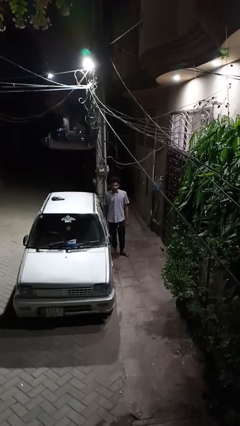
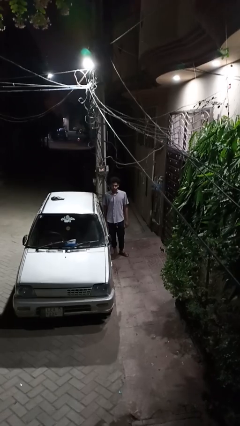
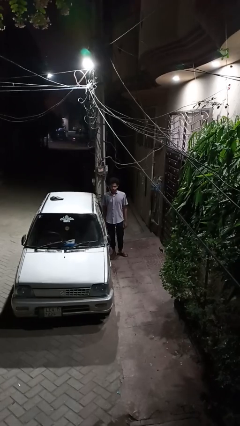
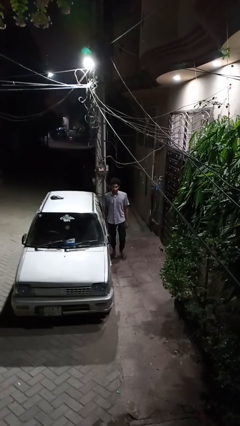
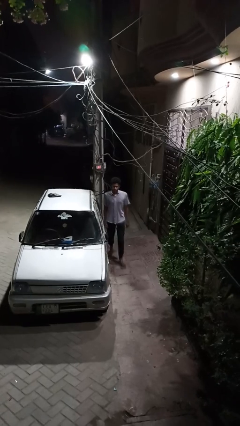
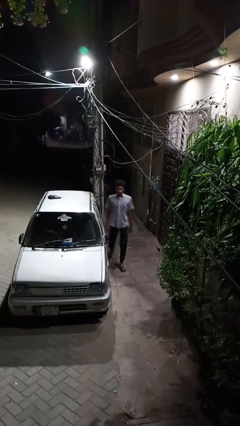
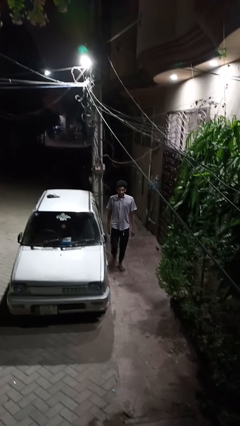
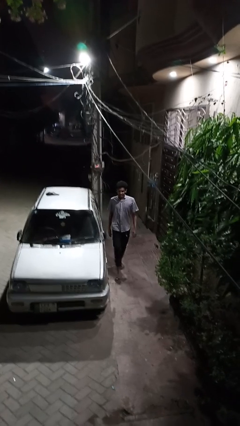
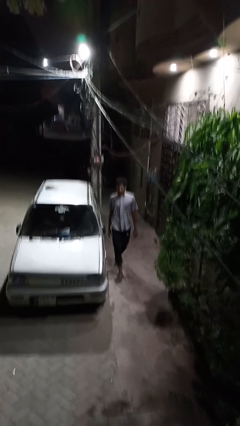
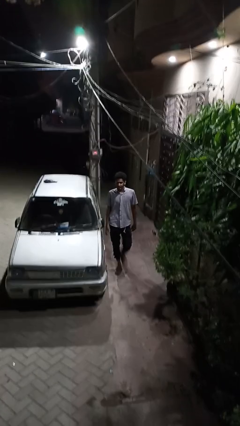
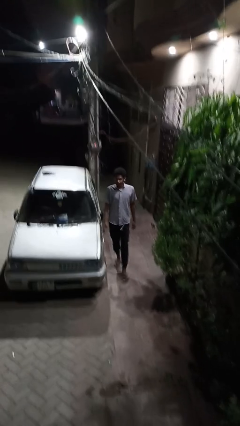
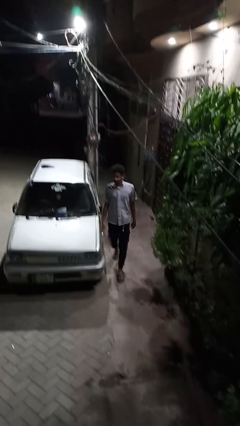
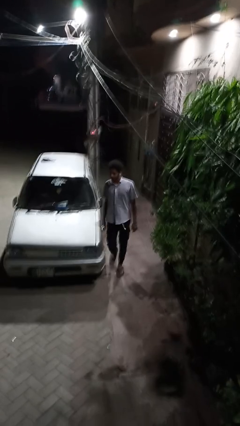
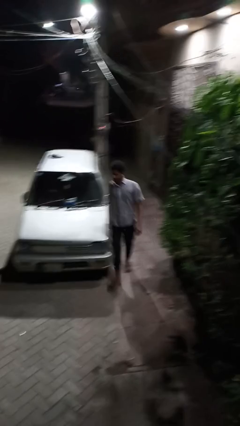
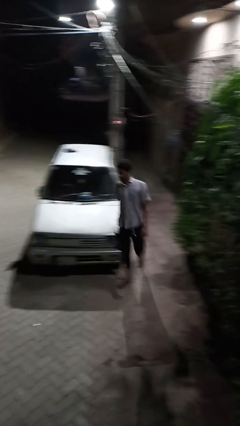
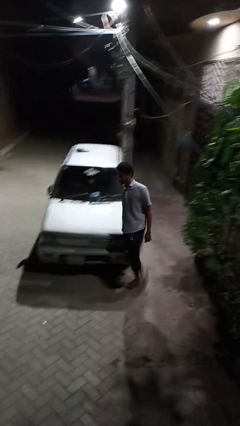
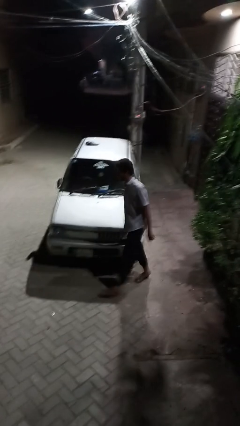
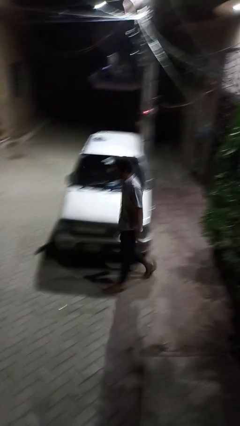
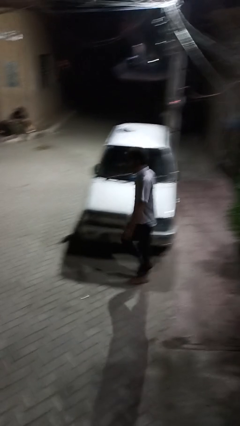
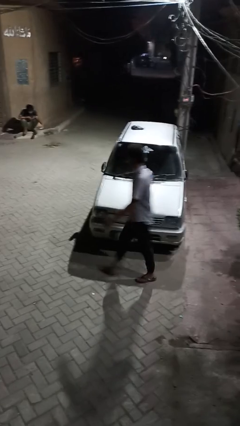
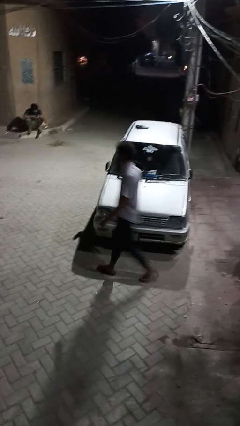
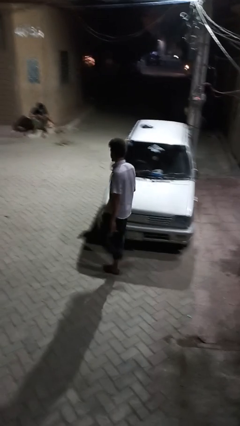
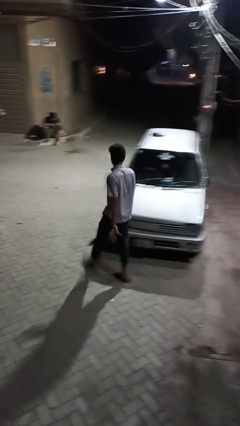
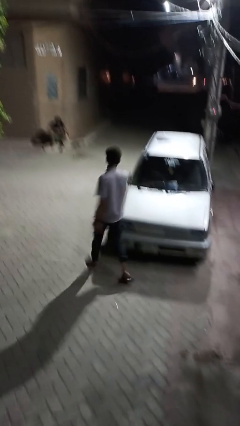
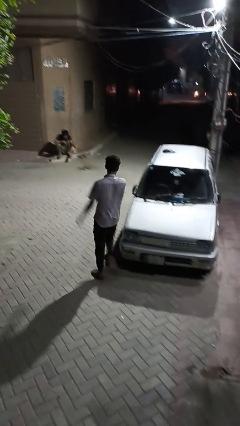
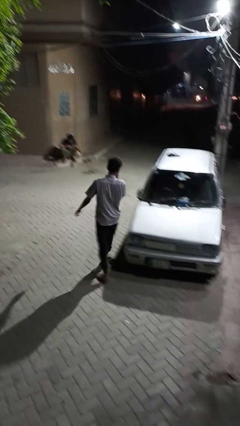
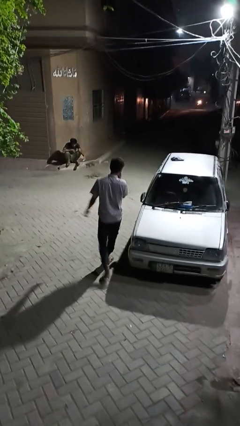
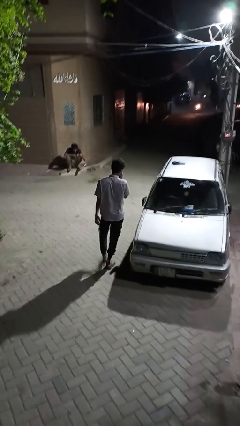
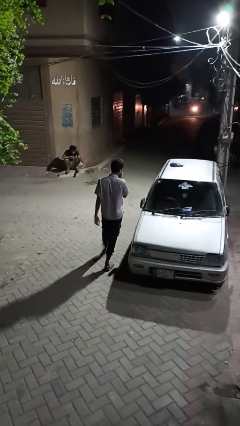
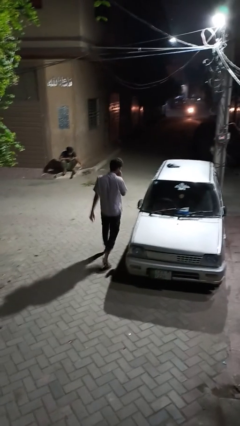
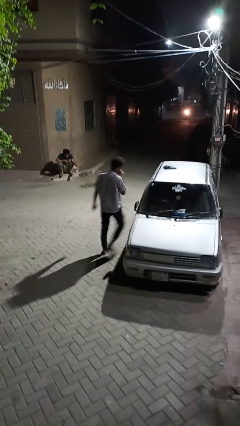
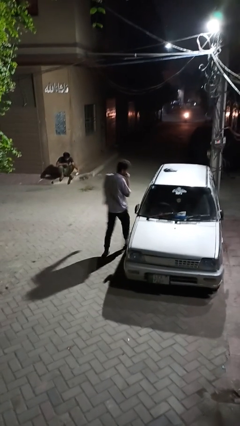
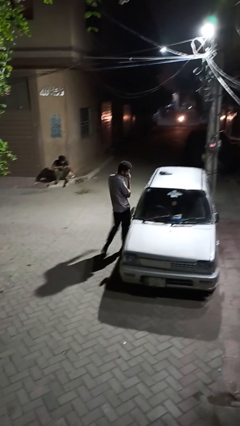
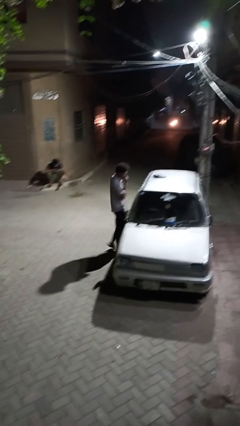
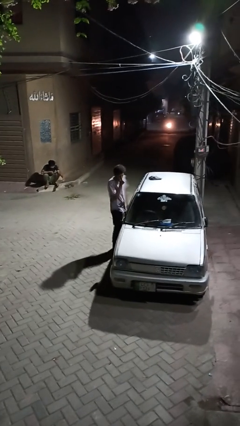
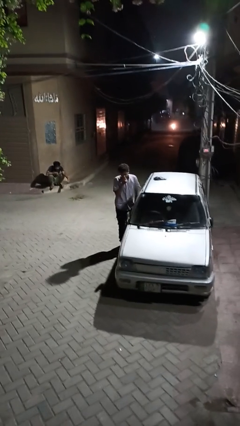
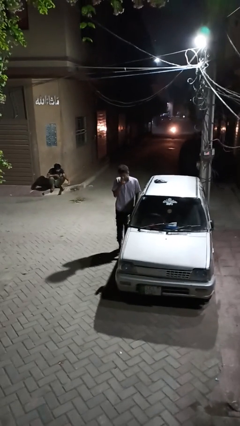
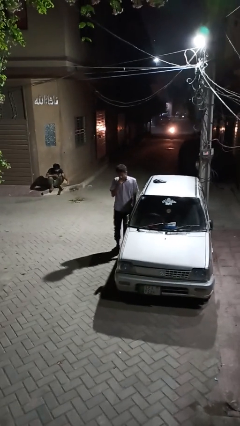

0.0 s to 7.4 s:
person walks around car

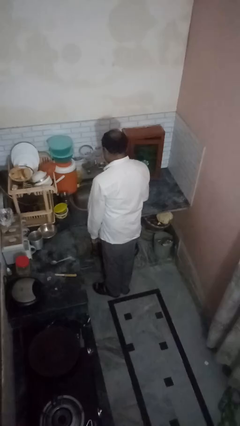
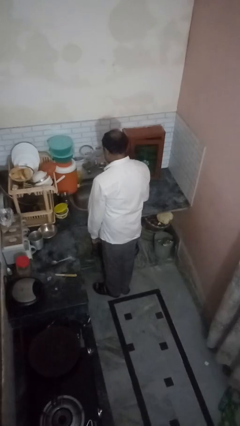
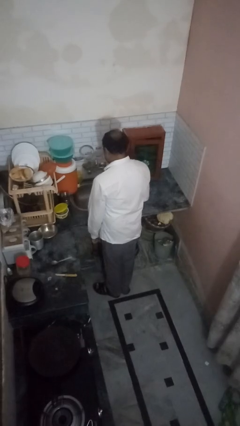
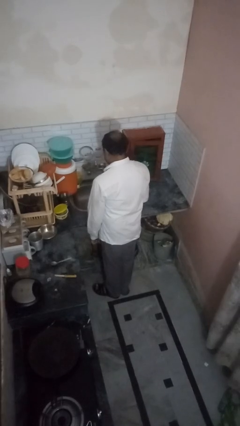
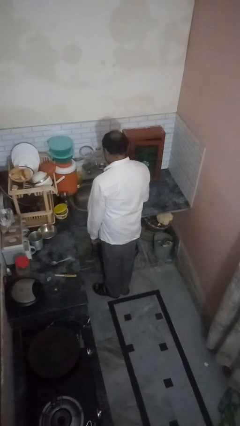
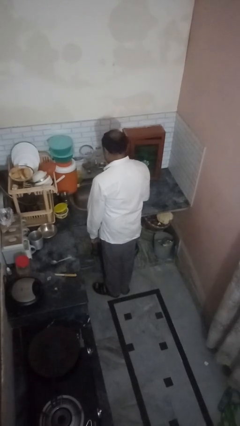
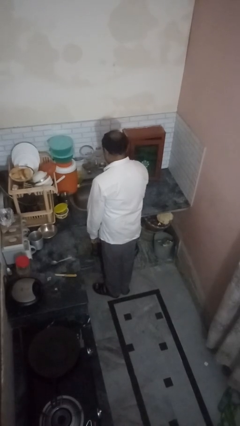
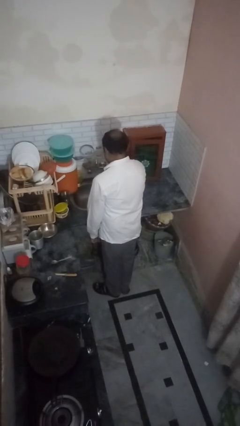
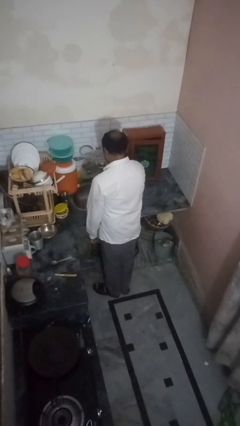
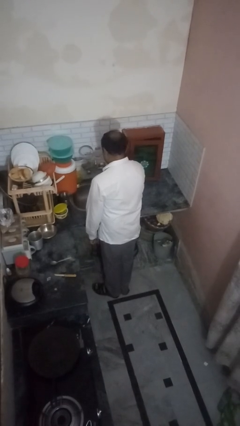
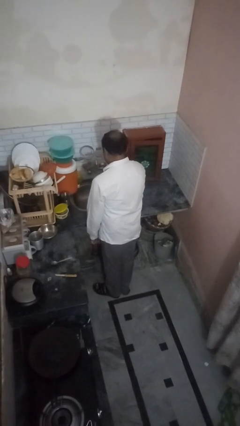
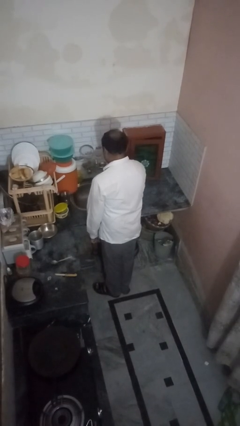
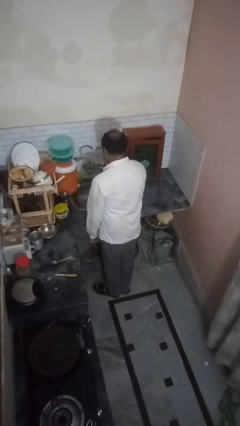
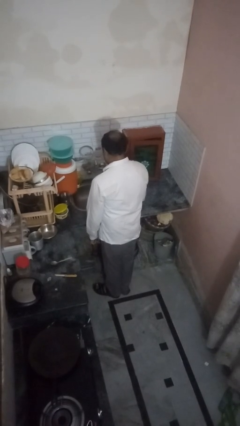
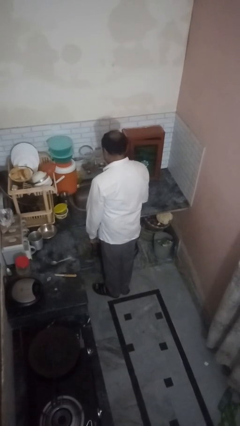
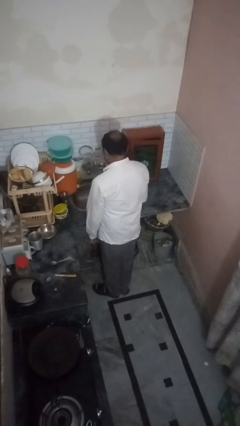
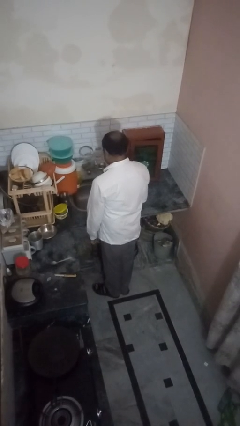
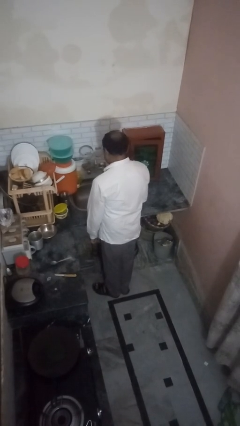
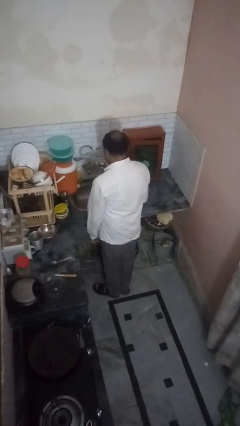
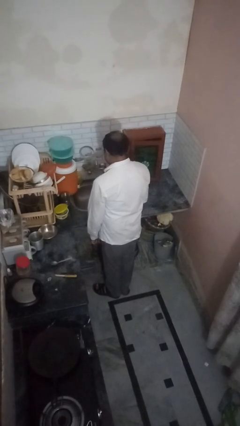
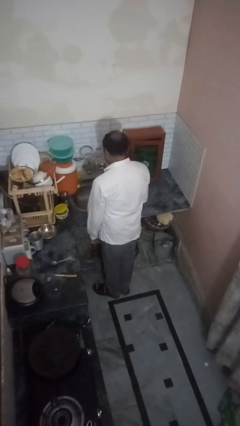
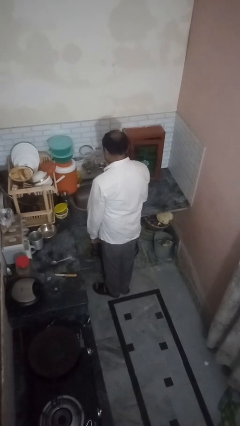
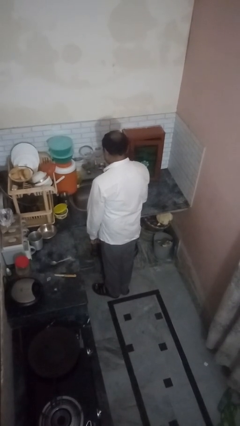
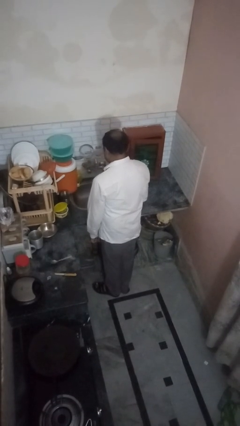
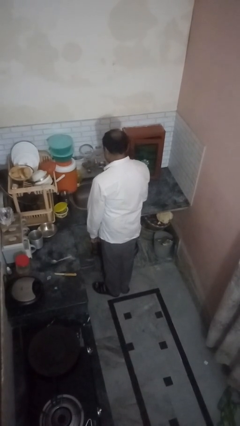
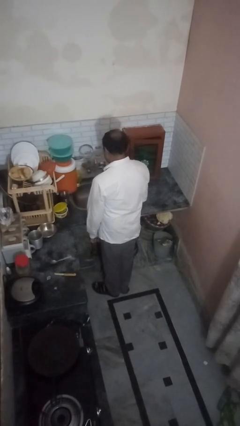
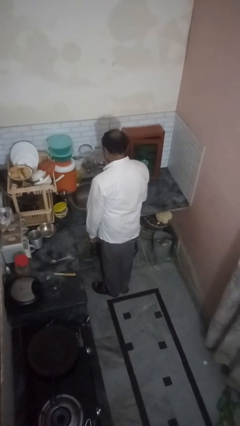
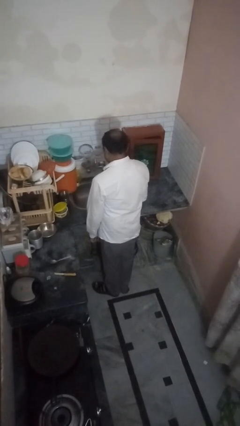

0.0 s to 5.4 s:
person turns on faucet

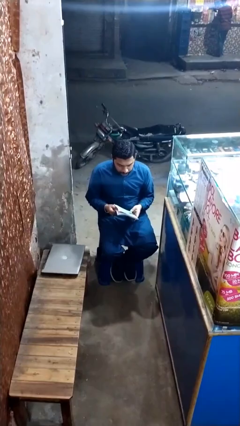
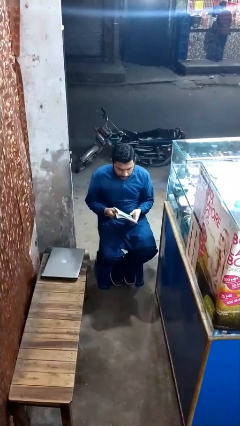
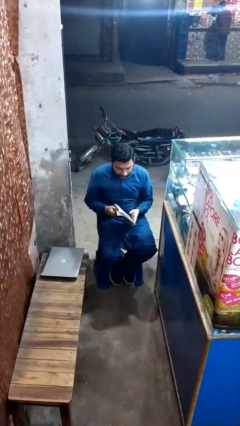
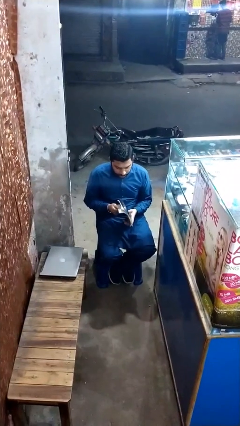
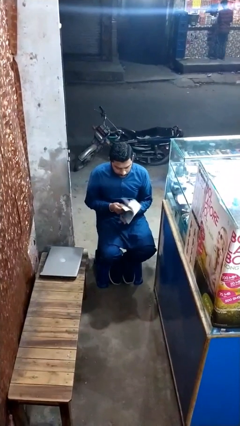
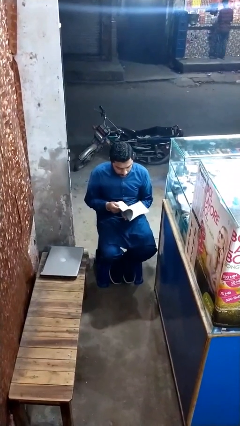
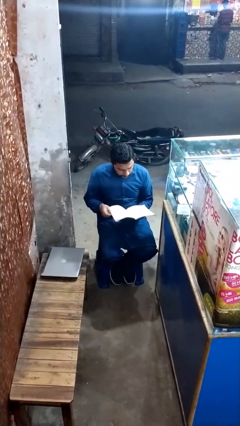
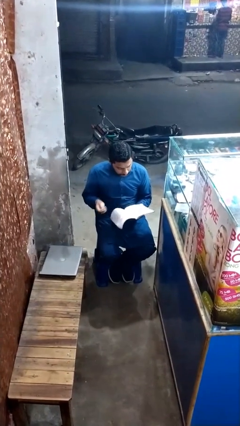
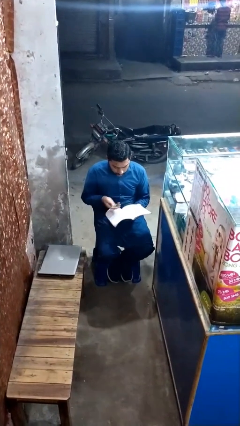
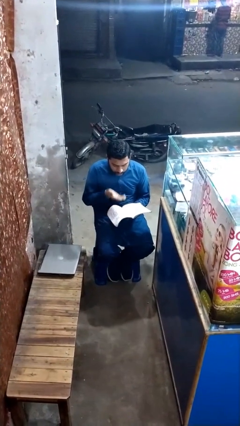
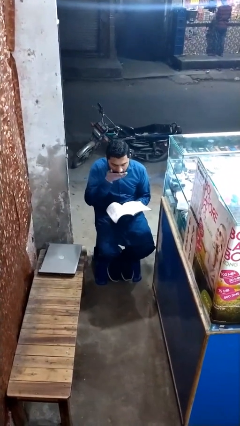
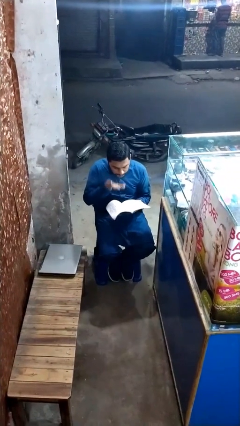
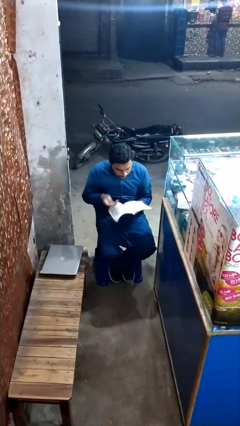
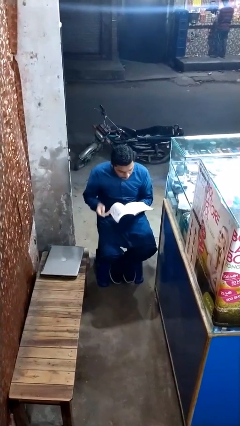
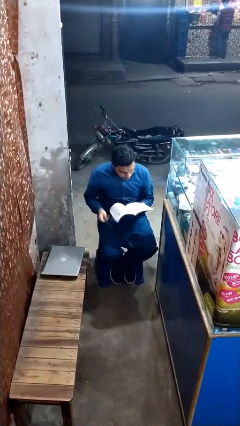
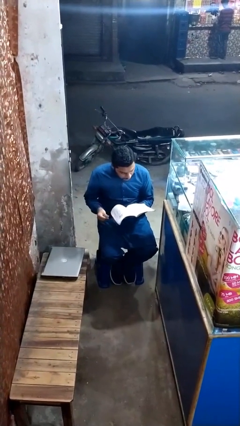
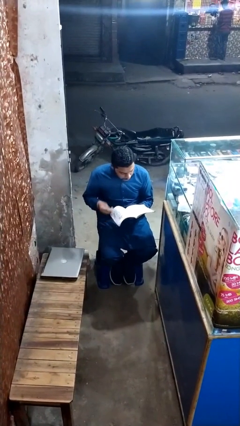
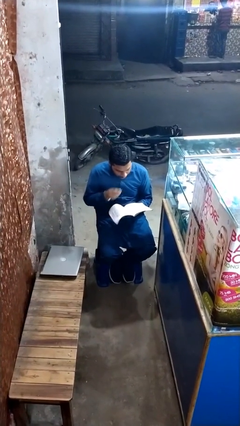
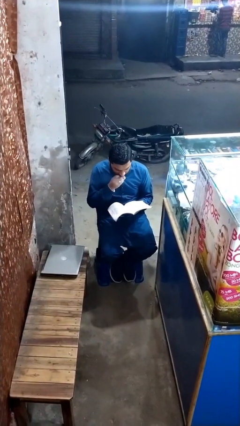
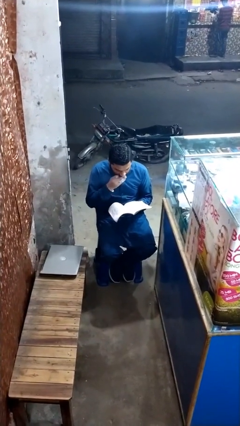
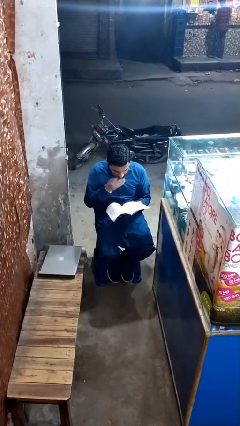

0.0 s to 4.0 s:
person reads document

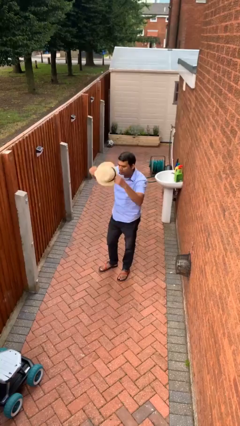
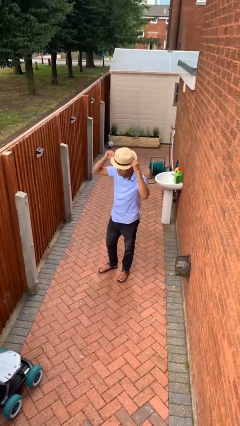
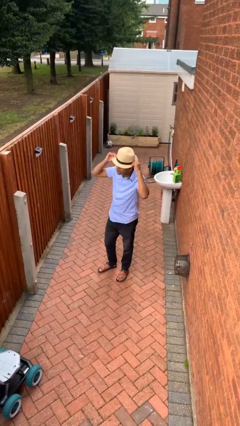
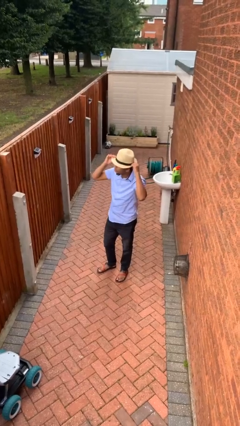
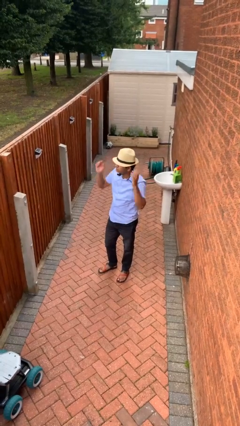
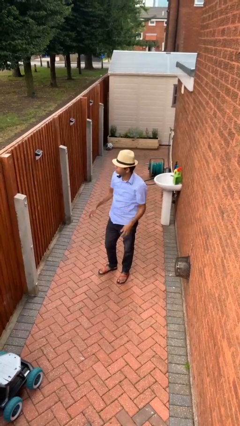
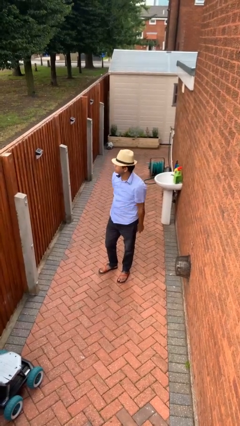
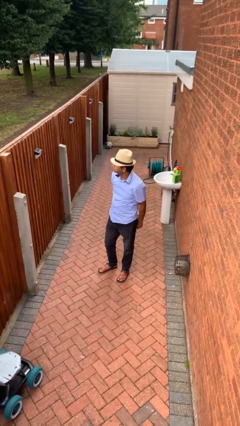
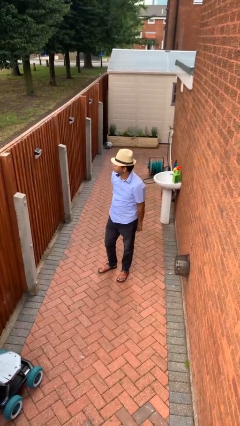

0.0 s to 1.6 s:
person puts on hat
